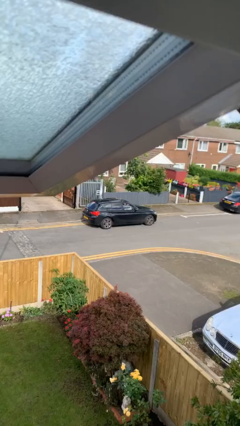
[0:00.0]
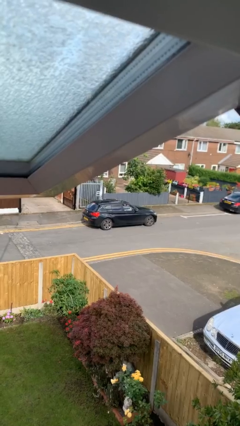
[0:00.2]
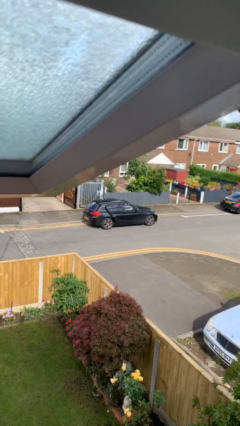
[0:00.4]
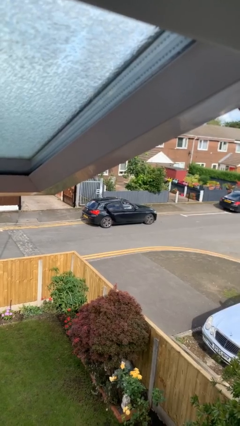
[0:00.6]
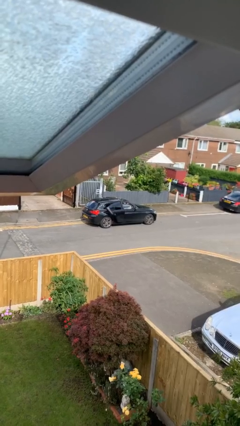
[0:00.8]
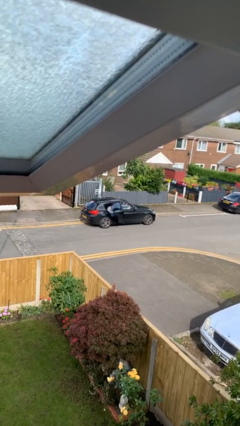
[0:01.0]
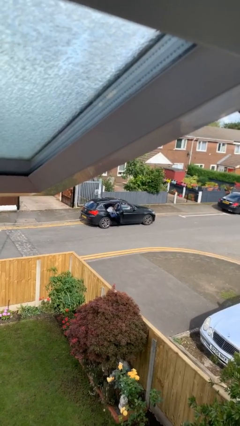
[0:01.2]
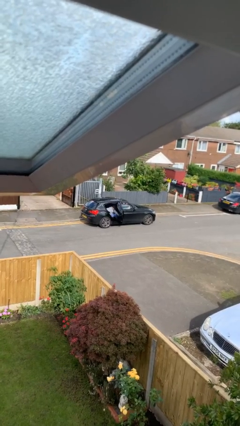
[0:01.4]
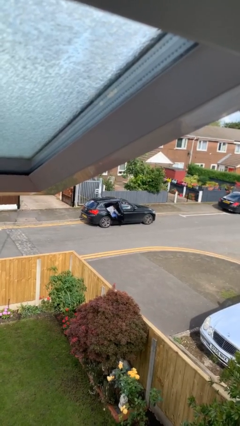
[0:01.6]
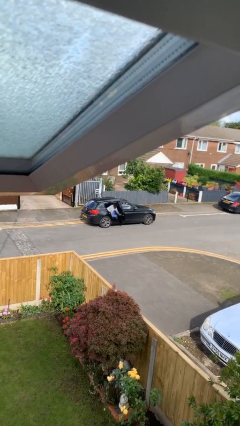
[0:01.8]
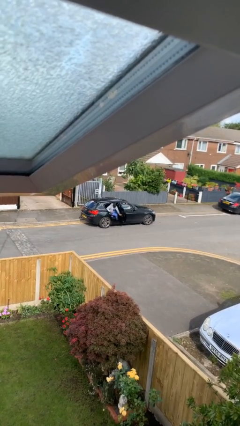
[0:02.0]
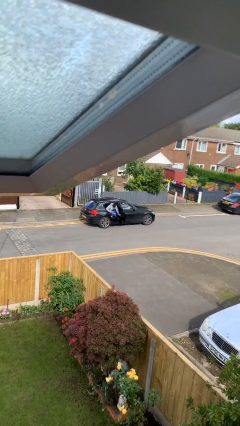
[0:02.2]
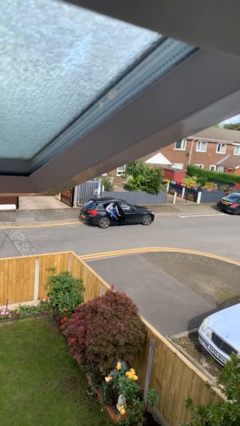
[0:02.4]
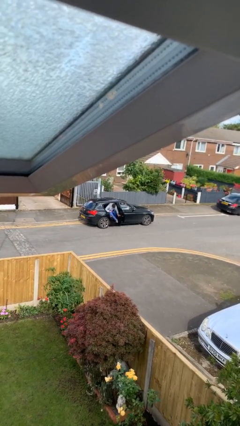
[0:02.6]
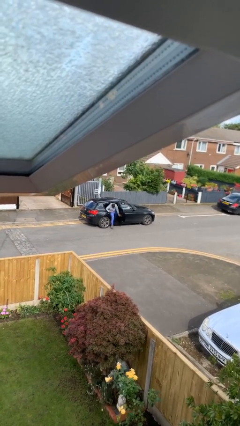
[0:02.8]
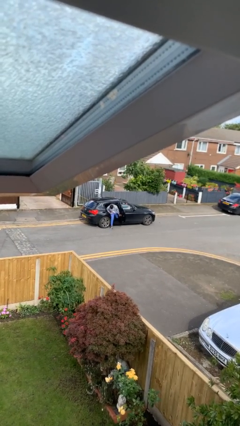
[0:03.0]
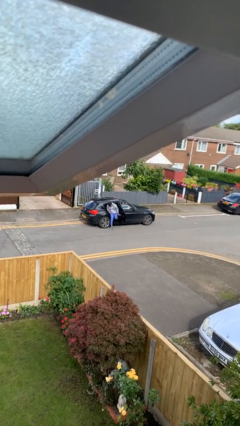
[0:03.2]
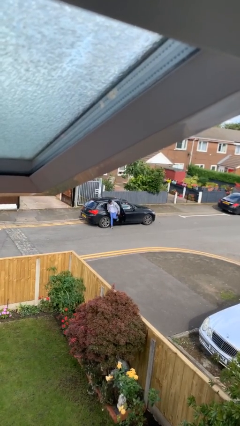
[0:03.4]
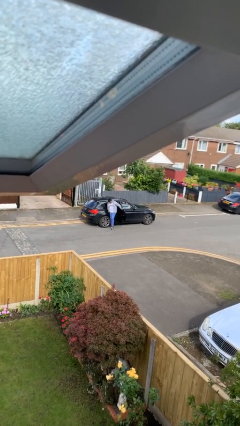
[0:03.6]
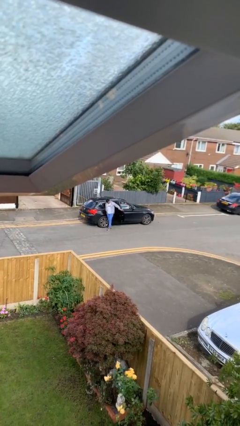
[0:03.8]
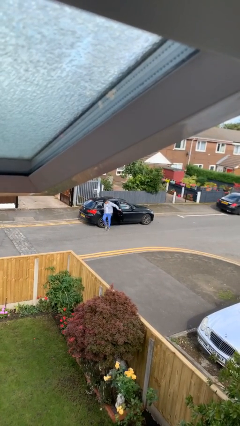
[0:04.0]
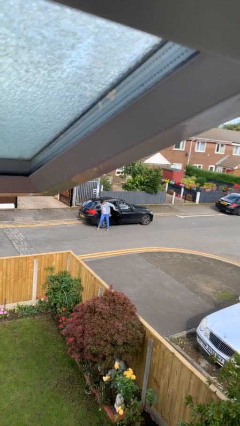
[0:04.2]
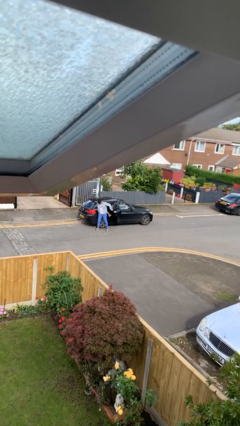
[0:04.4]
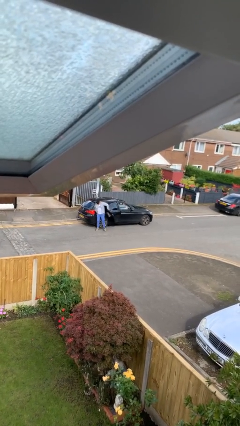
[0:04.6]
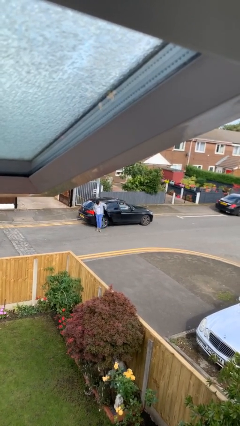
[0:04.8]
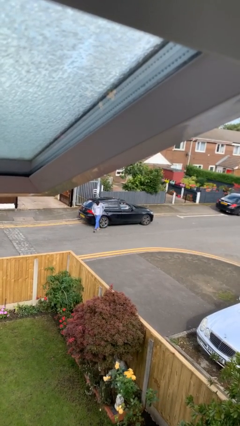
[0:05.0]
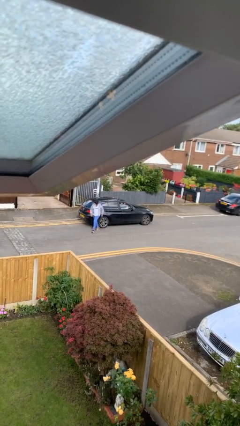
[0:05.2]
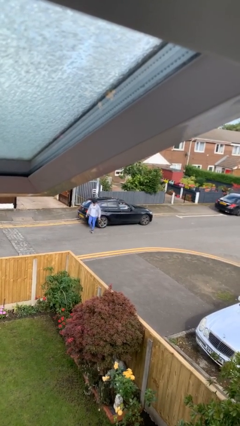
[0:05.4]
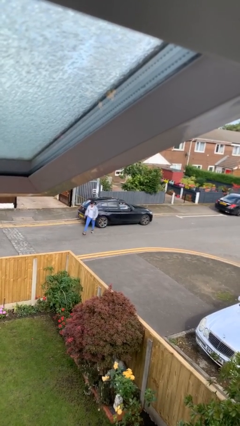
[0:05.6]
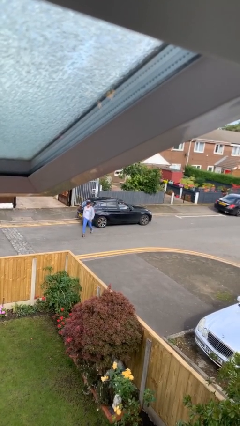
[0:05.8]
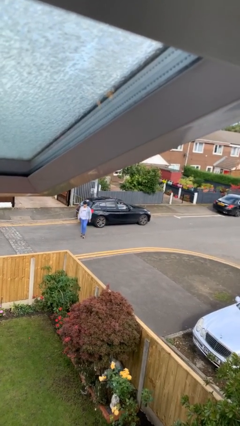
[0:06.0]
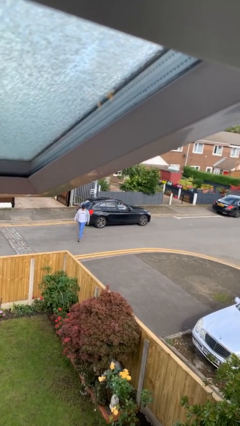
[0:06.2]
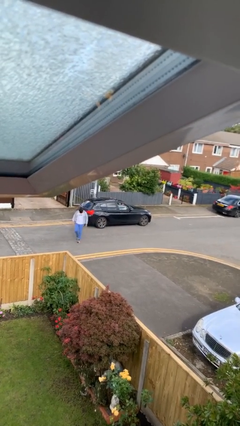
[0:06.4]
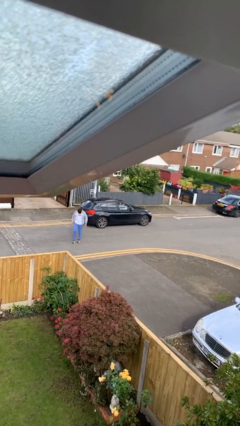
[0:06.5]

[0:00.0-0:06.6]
car drops off person

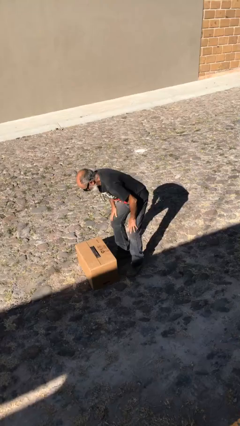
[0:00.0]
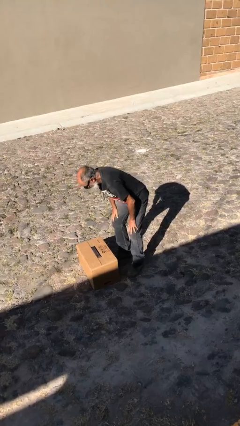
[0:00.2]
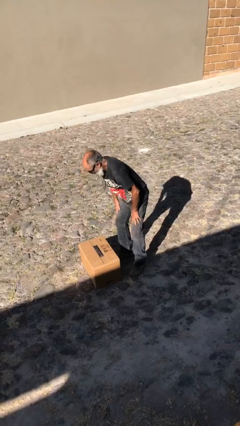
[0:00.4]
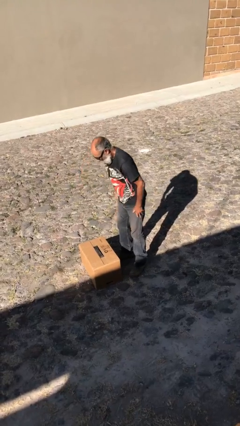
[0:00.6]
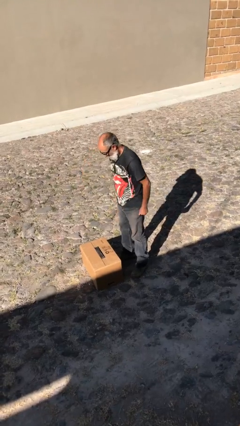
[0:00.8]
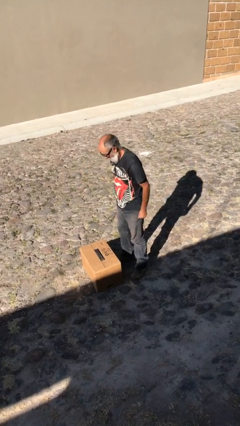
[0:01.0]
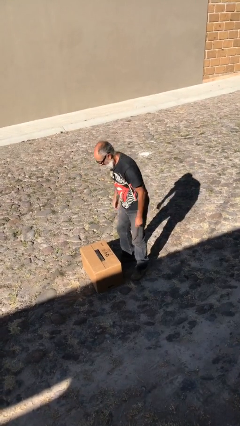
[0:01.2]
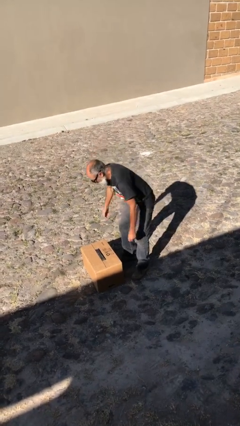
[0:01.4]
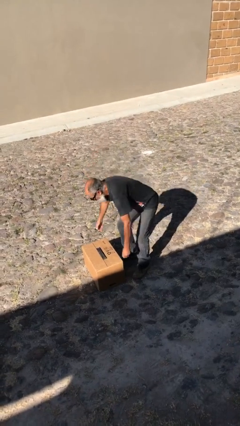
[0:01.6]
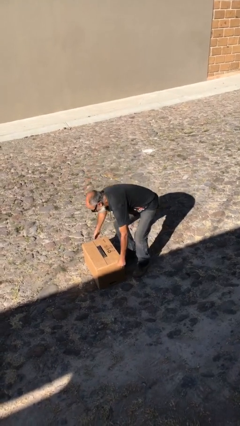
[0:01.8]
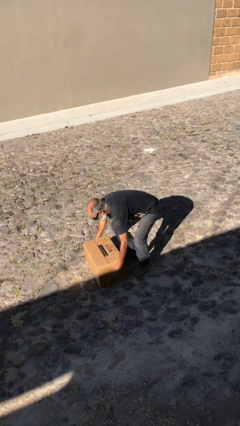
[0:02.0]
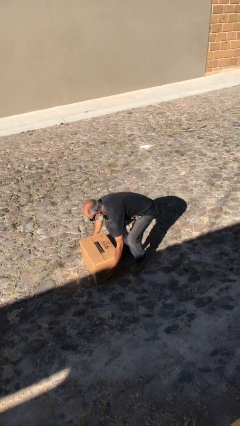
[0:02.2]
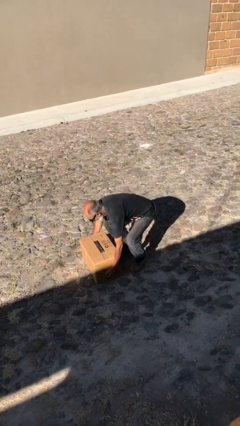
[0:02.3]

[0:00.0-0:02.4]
person picks up object from floor

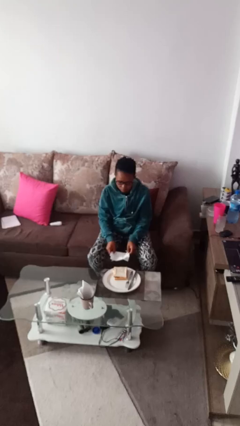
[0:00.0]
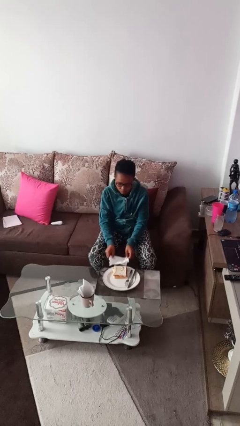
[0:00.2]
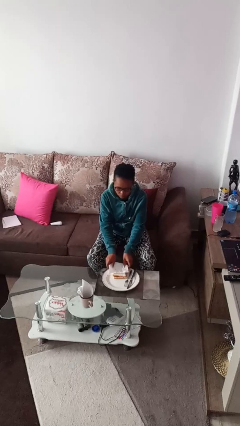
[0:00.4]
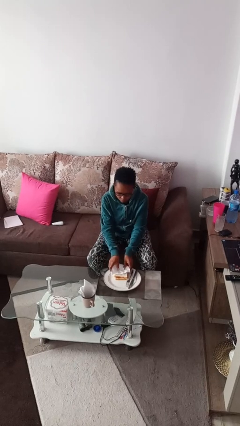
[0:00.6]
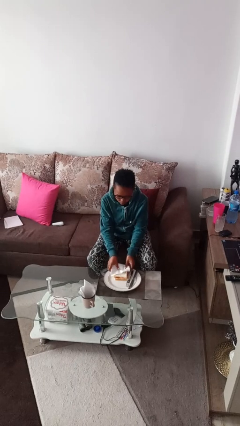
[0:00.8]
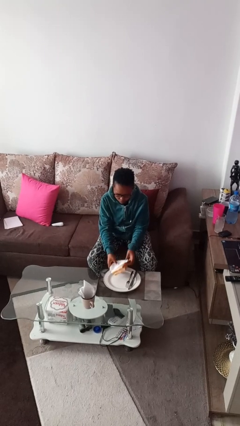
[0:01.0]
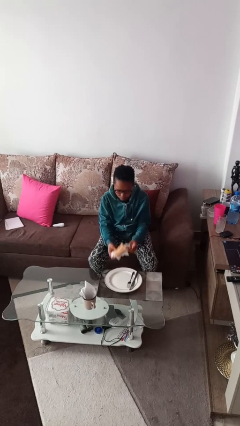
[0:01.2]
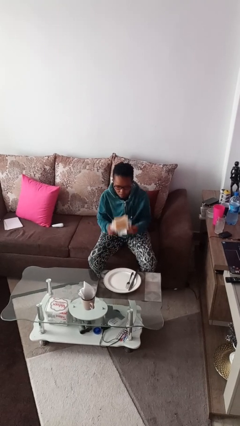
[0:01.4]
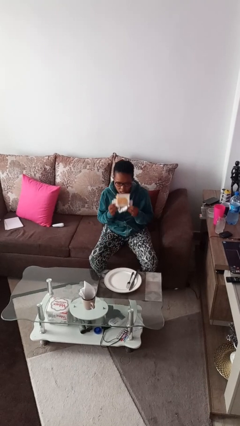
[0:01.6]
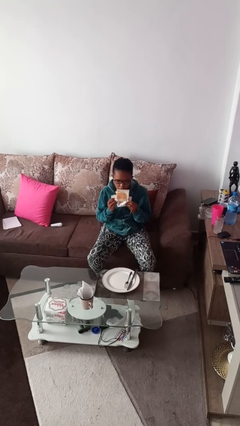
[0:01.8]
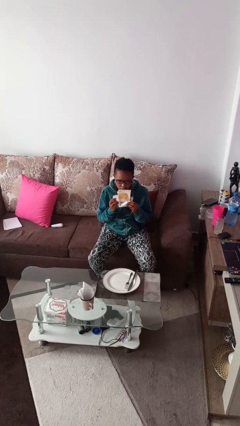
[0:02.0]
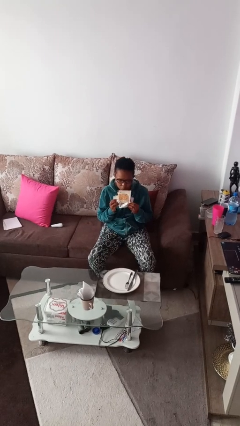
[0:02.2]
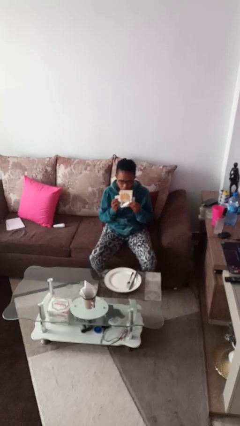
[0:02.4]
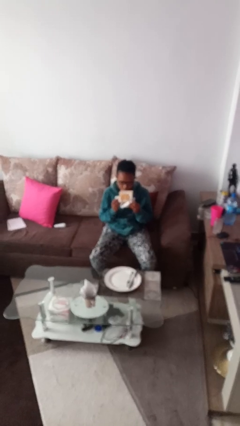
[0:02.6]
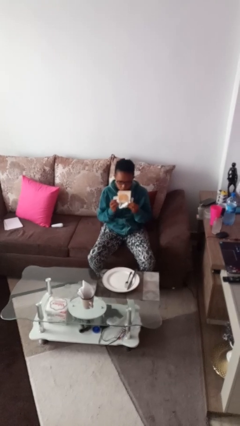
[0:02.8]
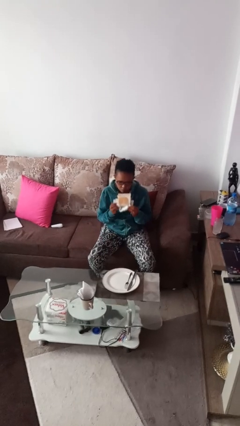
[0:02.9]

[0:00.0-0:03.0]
person eats with hands

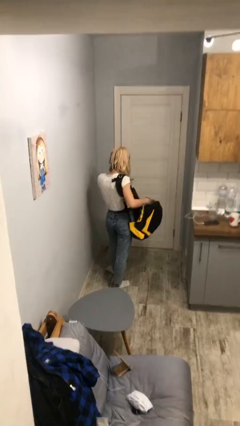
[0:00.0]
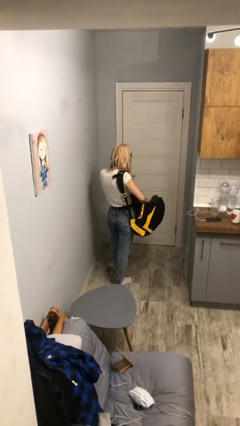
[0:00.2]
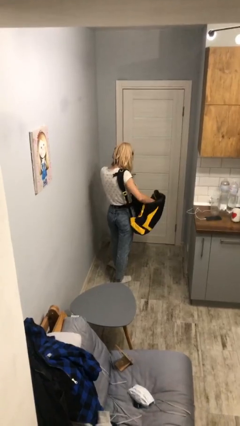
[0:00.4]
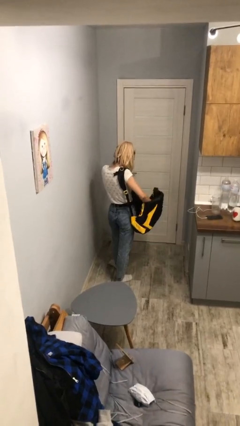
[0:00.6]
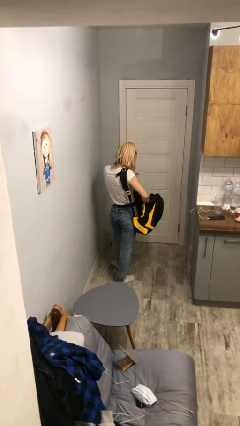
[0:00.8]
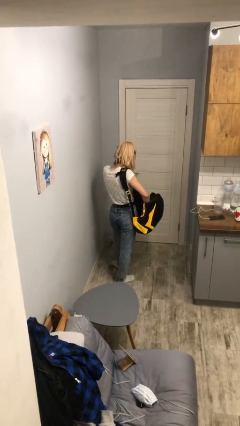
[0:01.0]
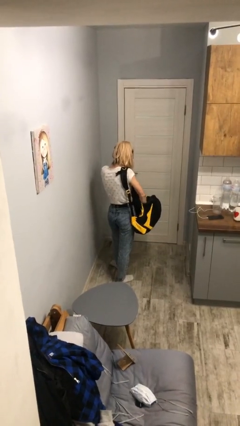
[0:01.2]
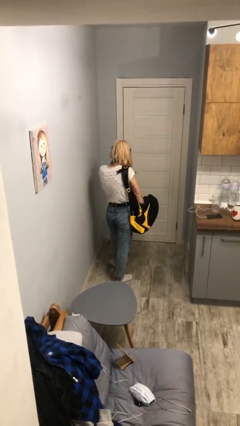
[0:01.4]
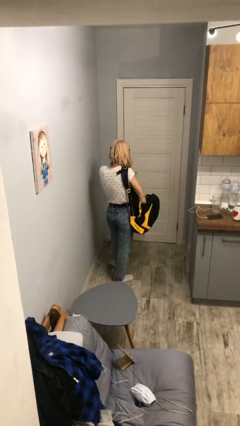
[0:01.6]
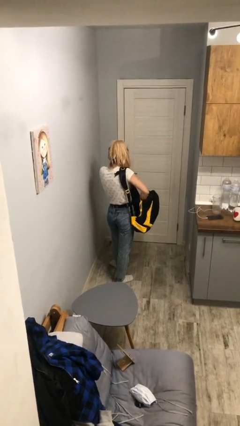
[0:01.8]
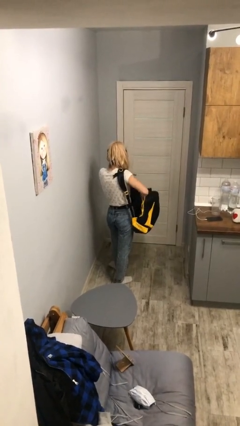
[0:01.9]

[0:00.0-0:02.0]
person searches in backpack

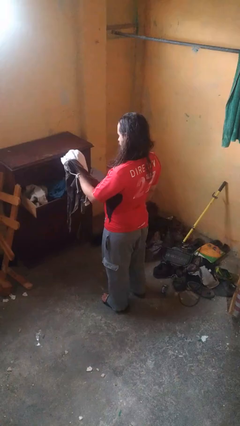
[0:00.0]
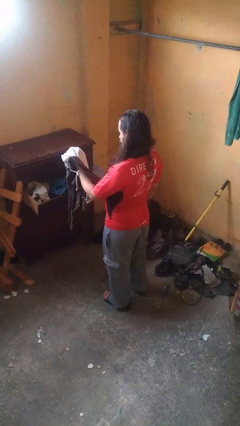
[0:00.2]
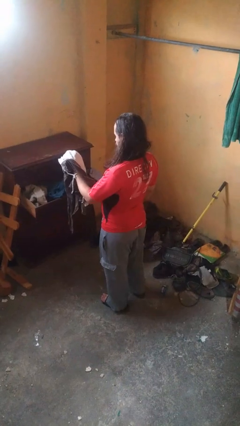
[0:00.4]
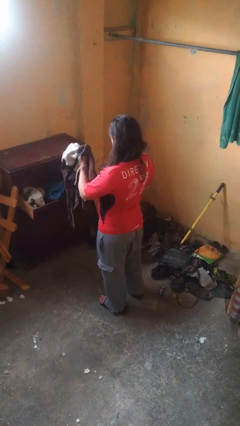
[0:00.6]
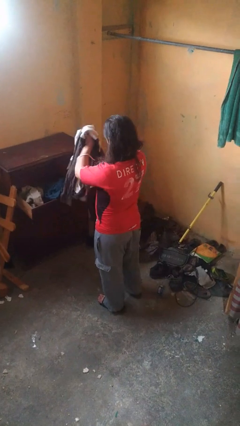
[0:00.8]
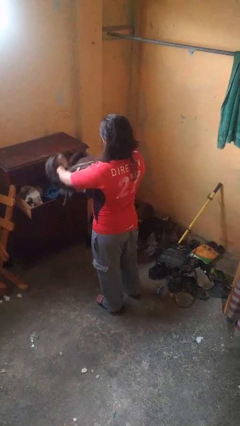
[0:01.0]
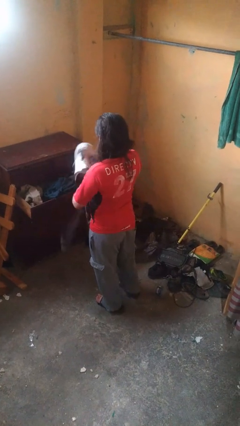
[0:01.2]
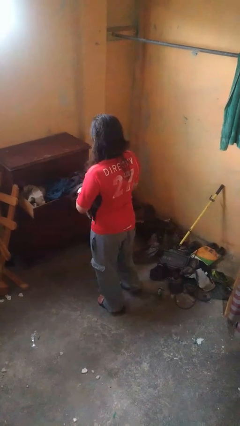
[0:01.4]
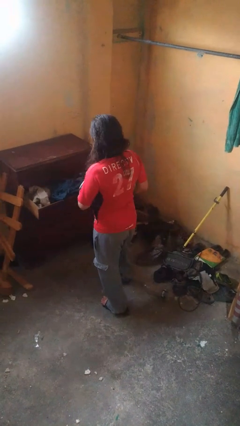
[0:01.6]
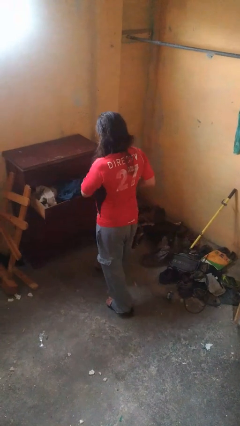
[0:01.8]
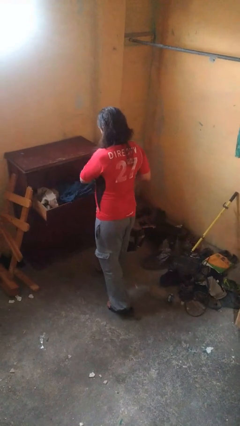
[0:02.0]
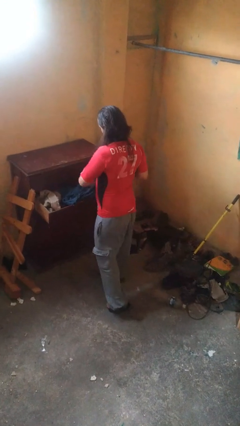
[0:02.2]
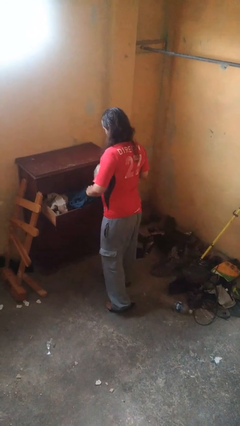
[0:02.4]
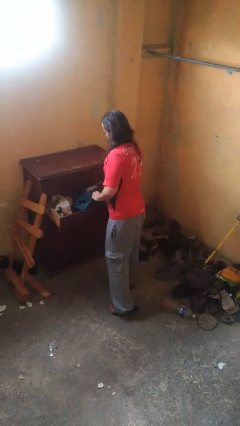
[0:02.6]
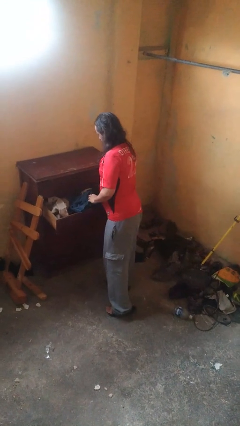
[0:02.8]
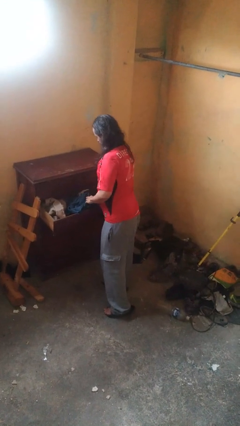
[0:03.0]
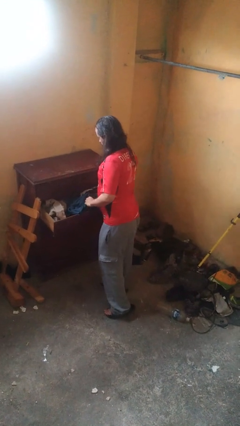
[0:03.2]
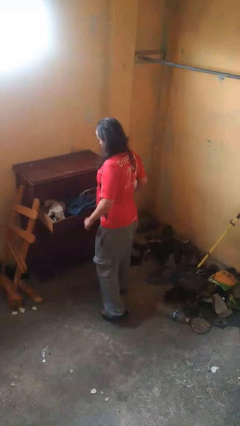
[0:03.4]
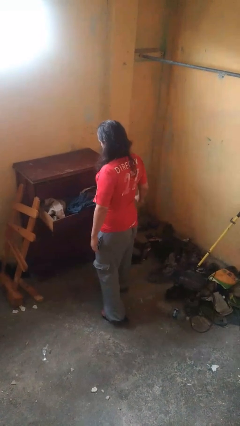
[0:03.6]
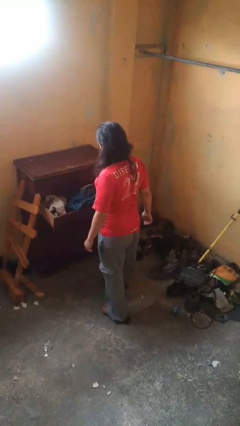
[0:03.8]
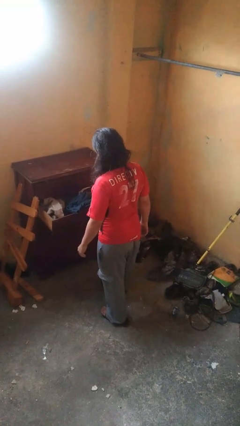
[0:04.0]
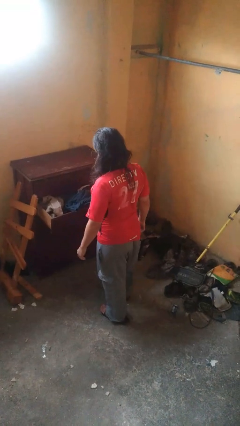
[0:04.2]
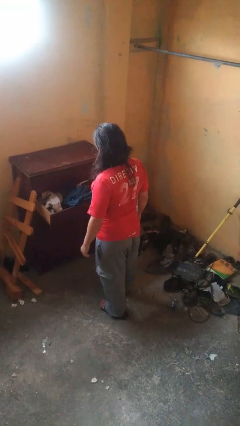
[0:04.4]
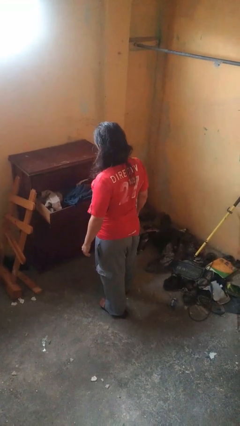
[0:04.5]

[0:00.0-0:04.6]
person puts clothes into dresser
